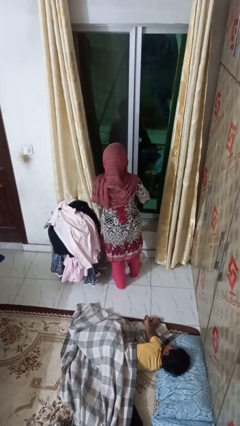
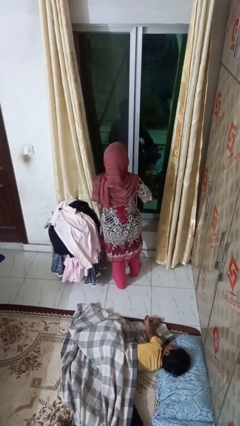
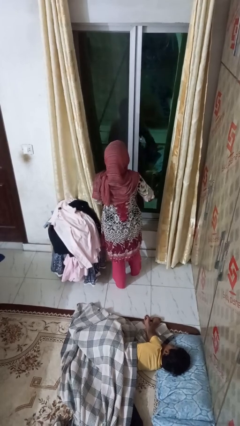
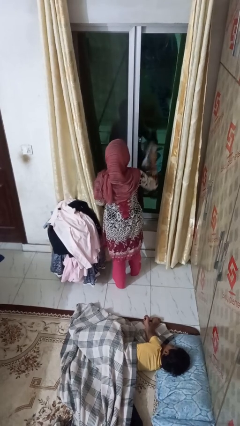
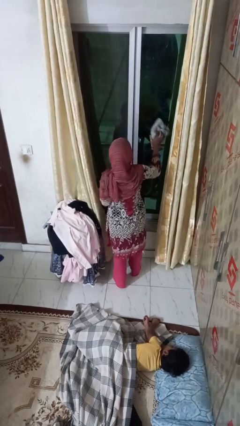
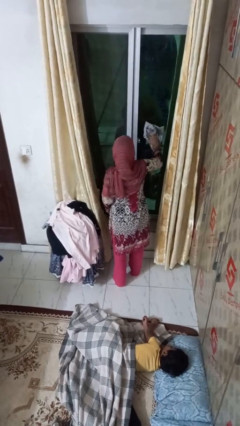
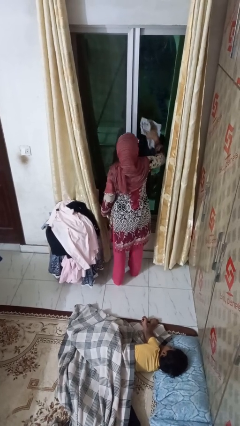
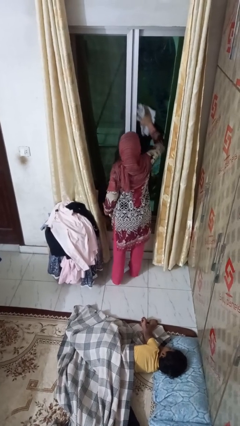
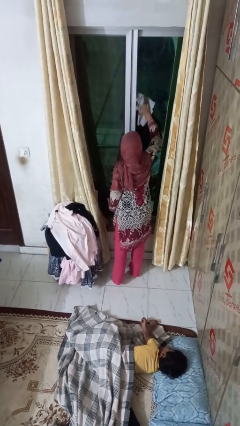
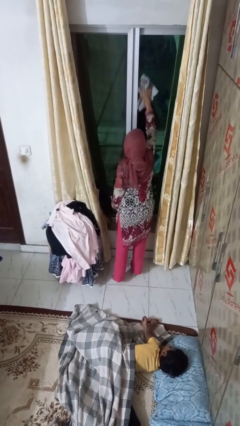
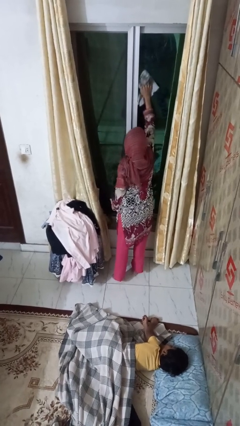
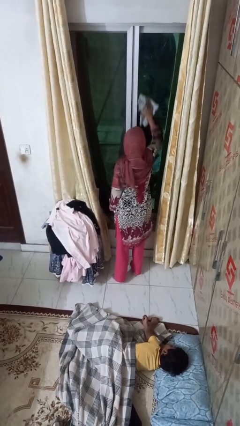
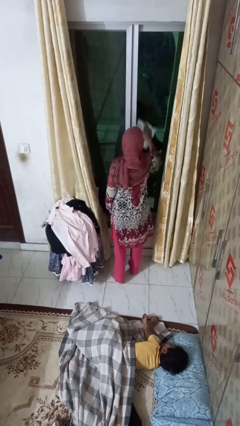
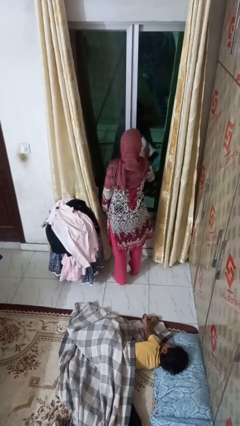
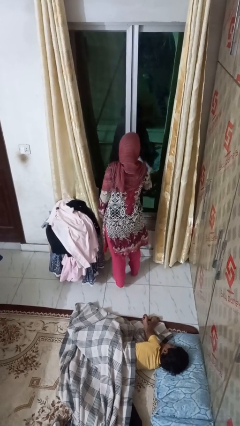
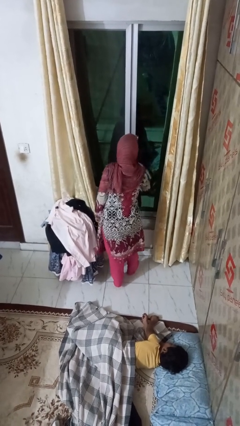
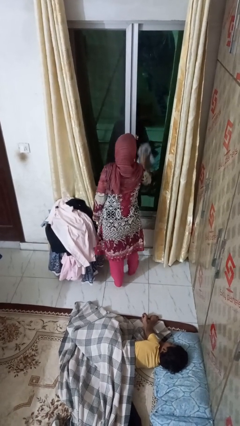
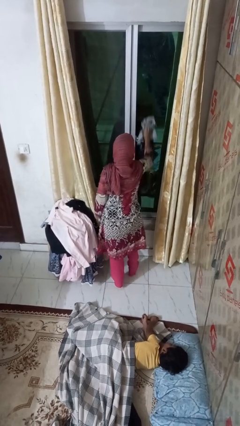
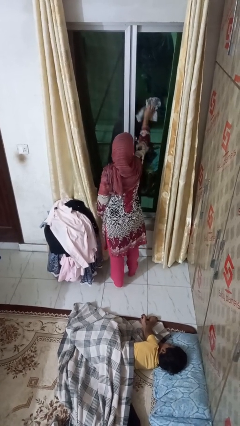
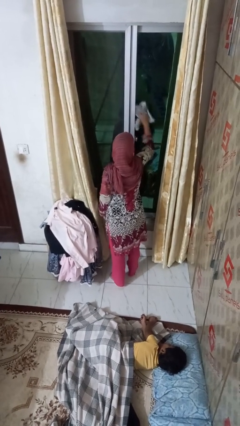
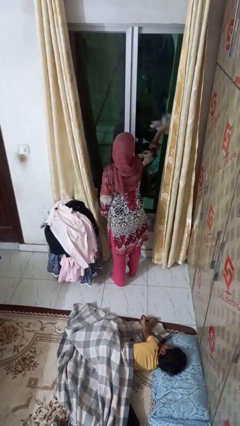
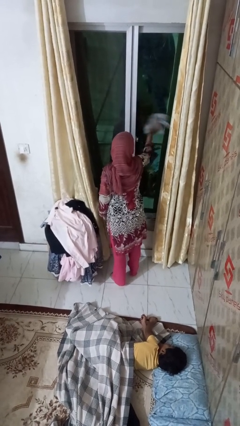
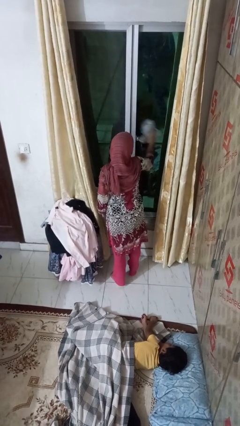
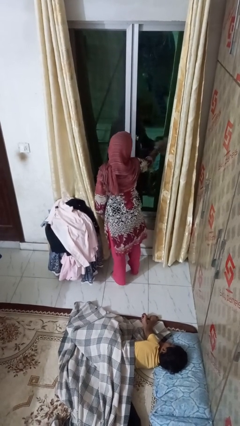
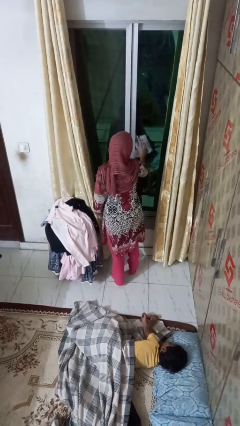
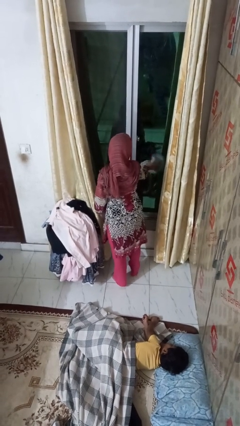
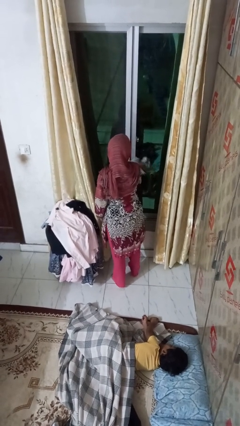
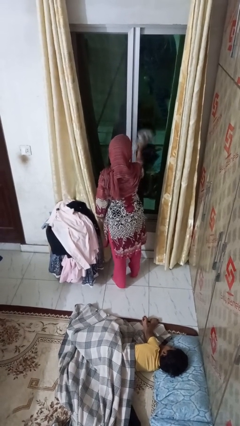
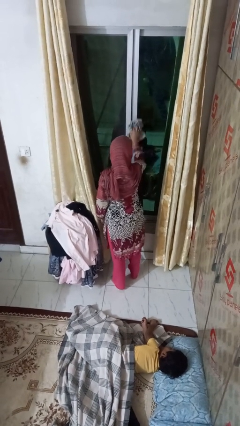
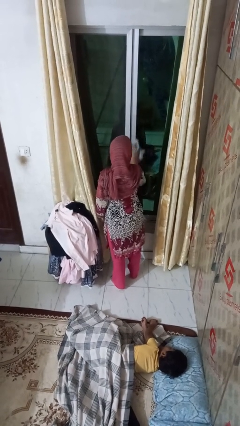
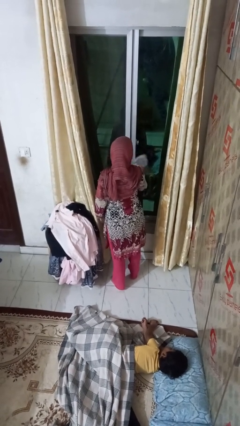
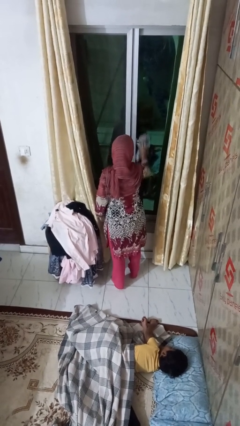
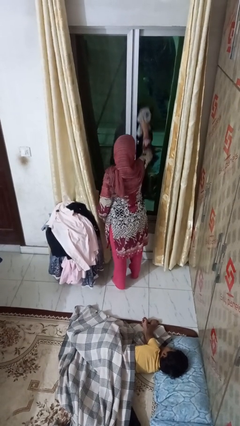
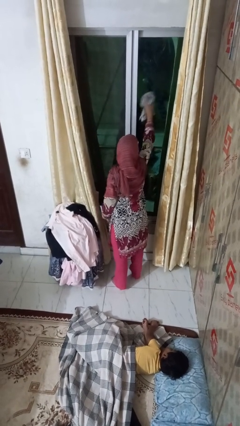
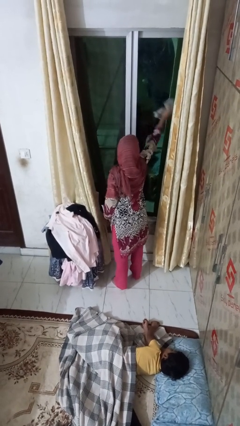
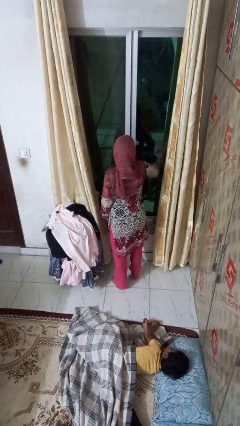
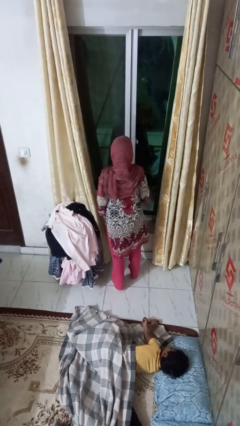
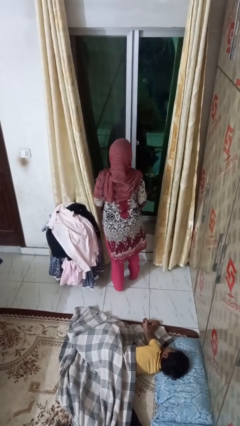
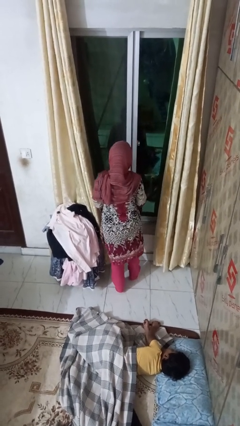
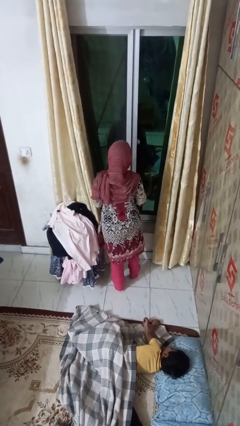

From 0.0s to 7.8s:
person washes window

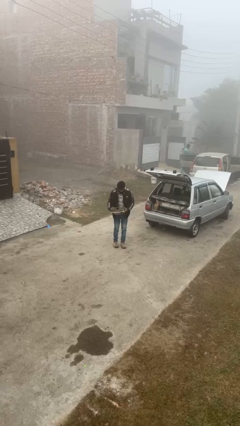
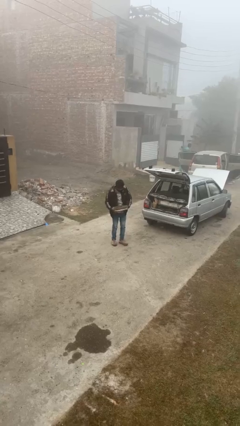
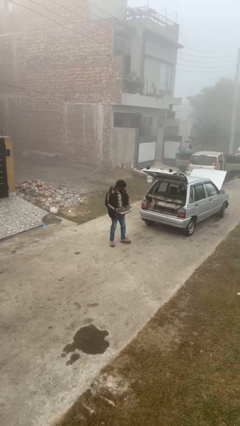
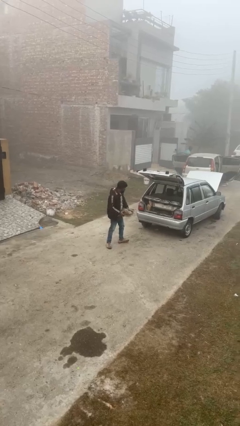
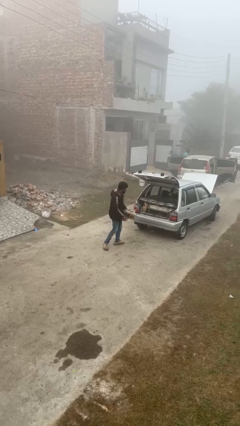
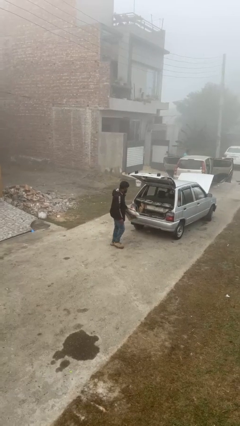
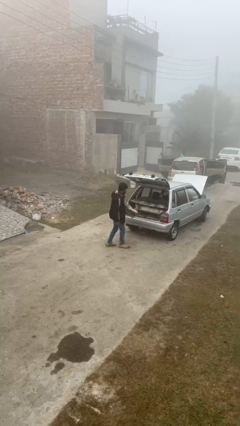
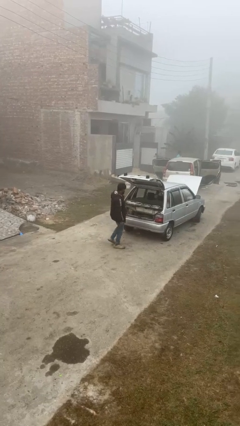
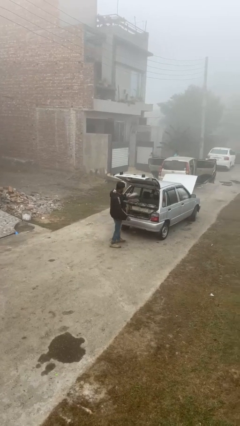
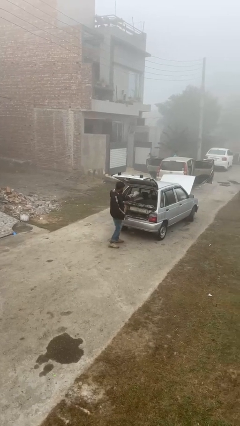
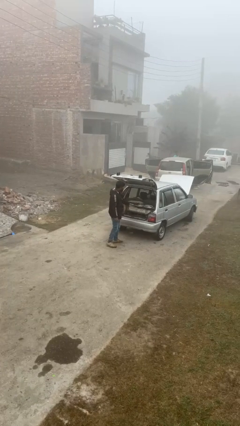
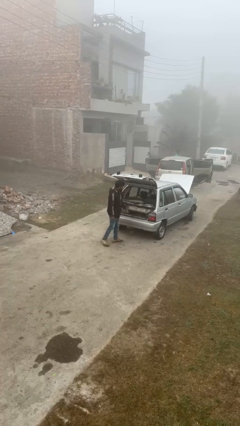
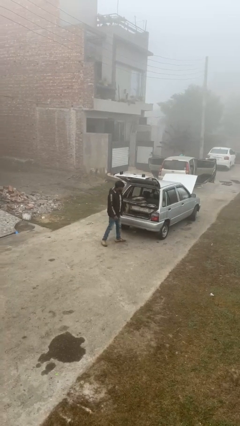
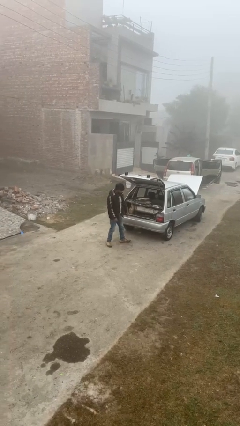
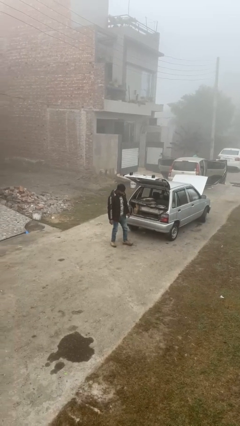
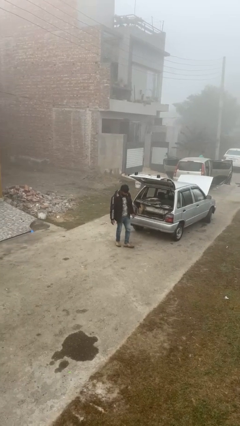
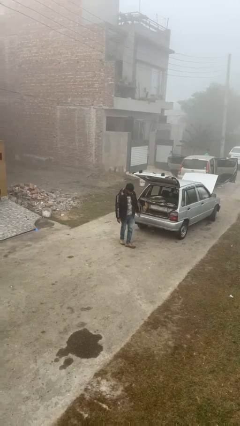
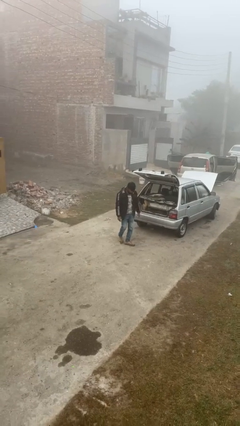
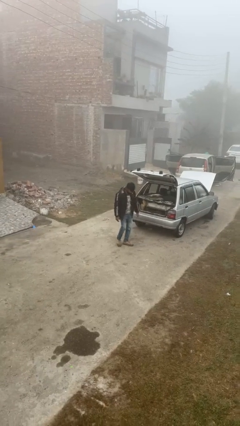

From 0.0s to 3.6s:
person loads car

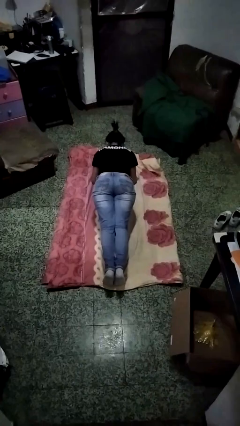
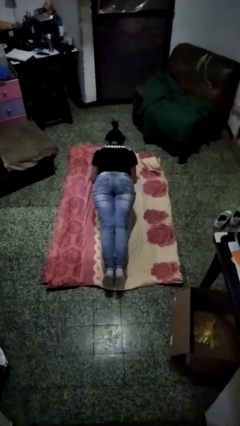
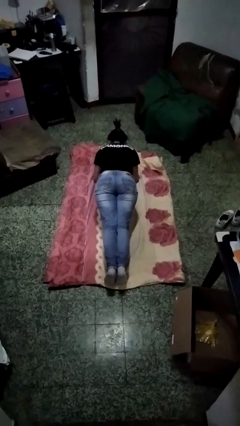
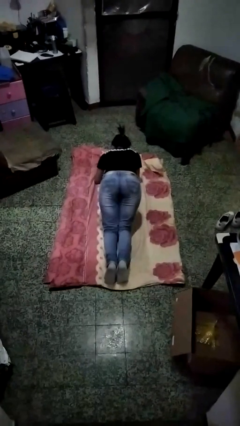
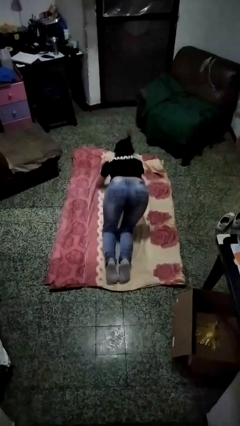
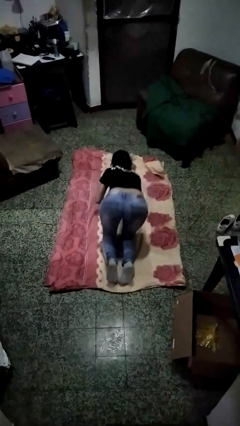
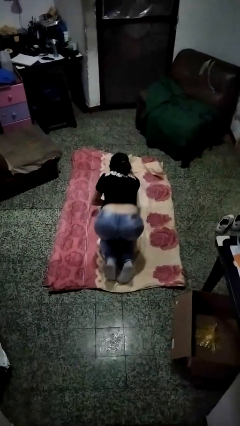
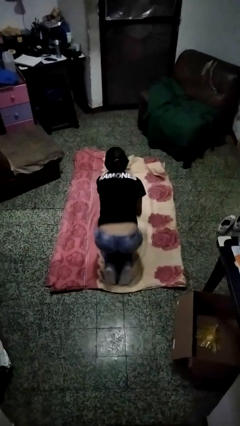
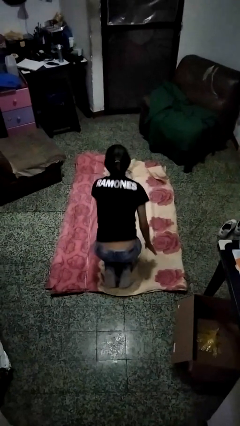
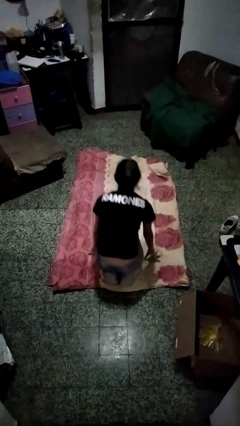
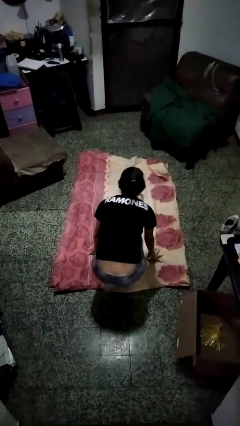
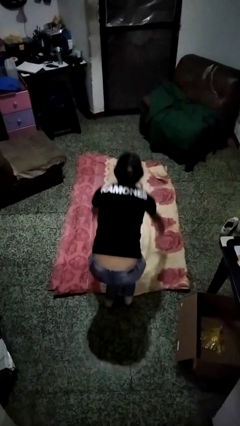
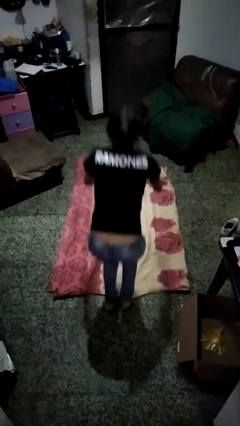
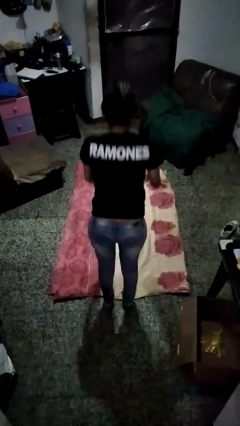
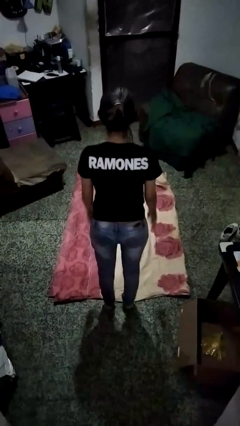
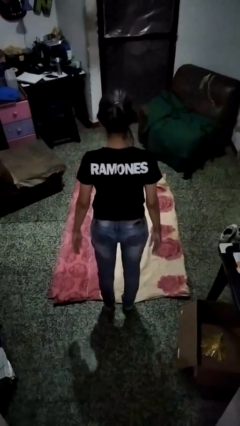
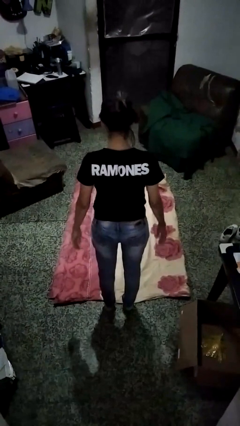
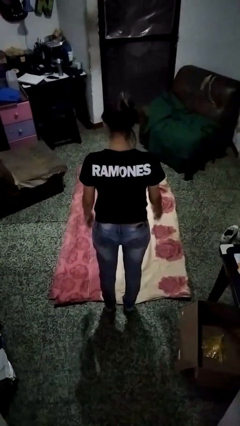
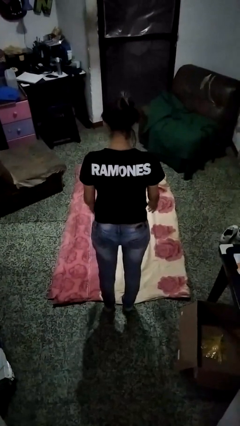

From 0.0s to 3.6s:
person stands up from floor

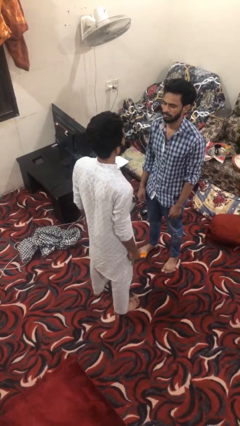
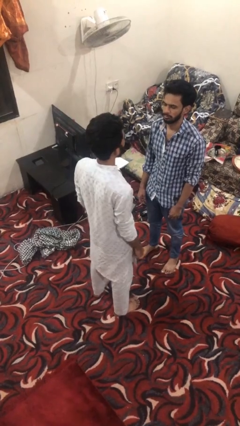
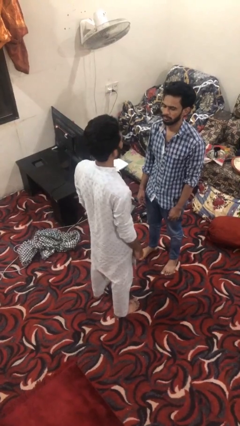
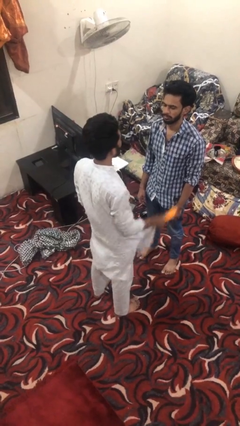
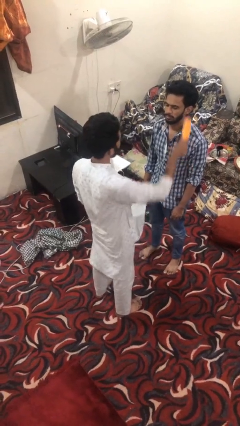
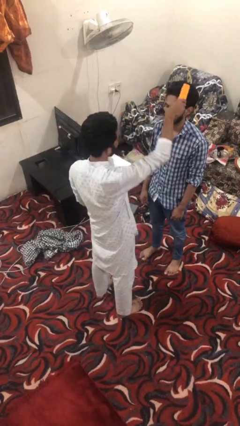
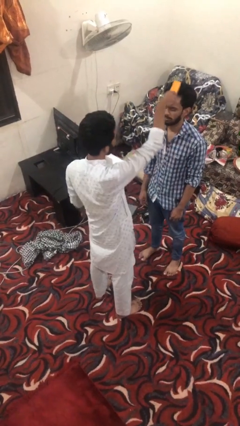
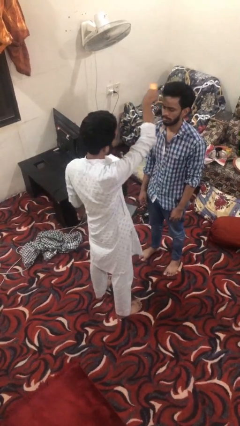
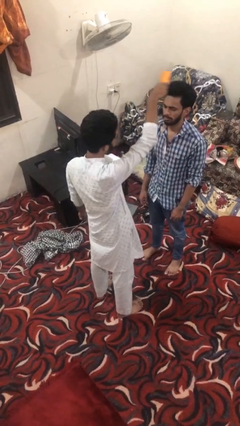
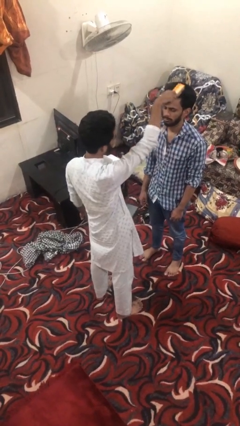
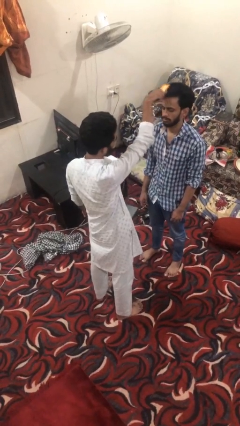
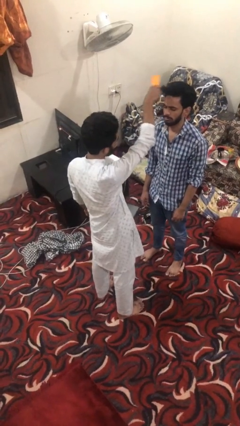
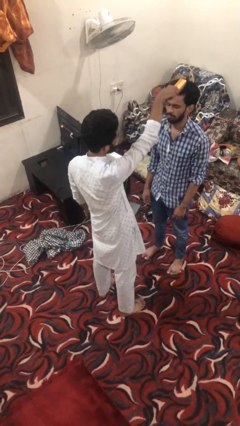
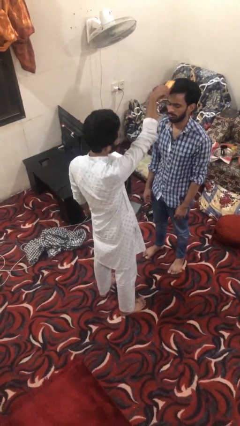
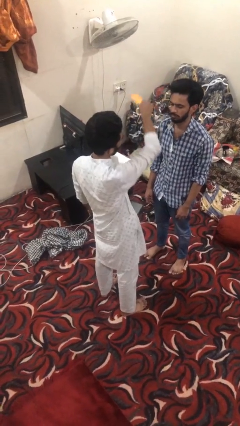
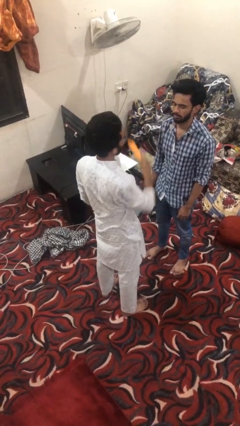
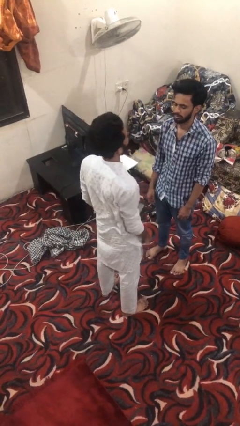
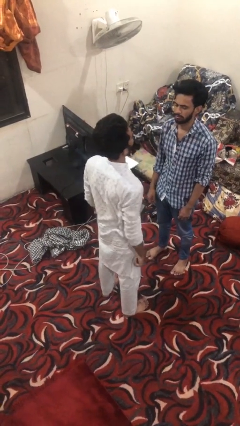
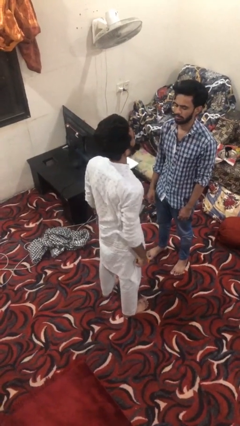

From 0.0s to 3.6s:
person brushes hair of person
